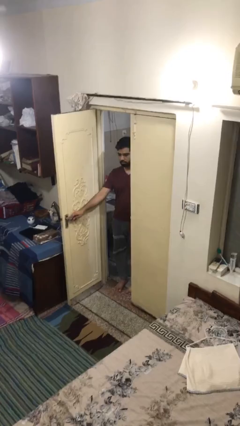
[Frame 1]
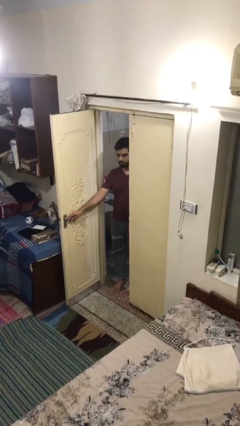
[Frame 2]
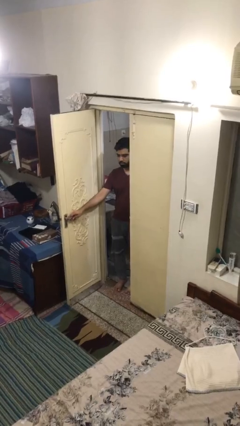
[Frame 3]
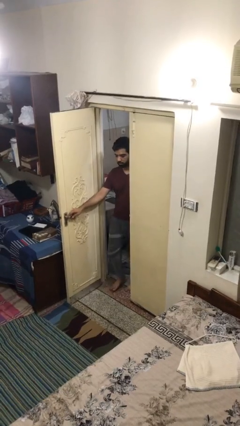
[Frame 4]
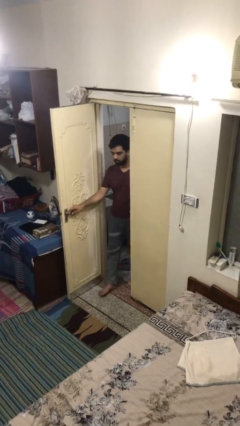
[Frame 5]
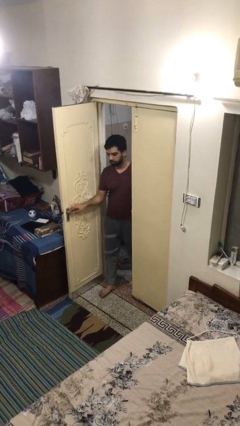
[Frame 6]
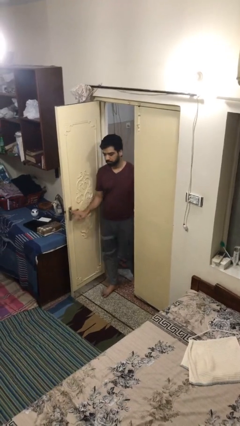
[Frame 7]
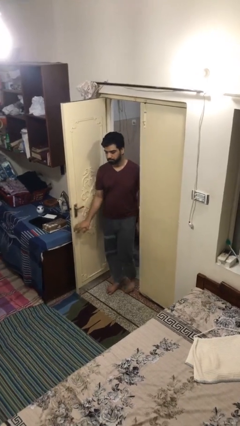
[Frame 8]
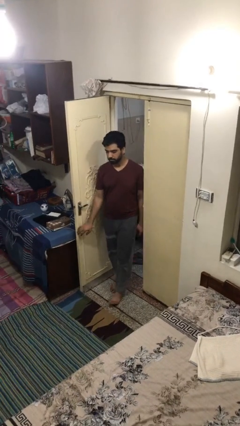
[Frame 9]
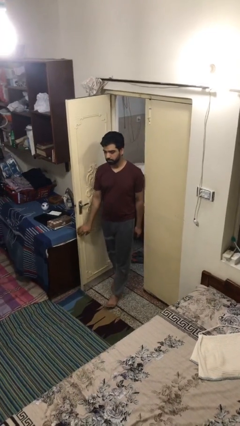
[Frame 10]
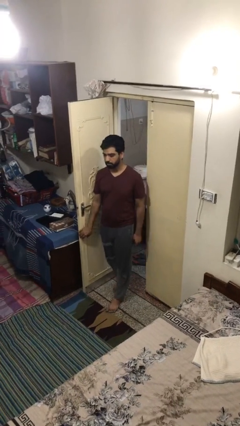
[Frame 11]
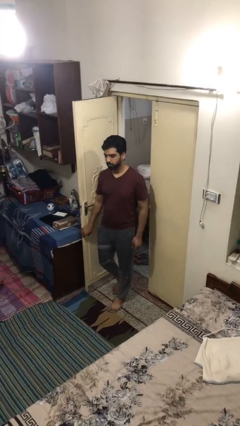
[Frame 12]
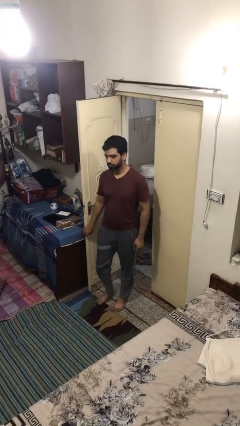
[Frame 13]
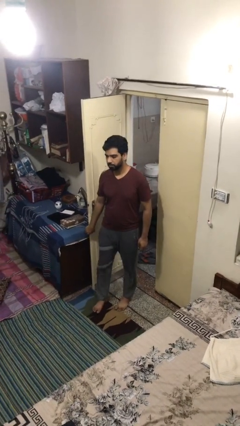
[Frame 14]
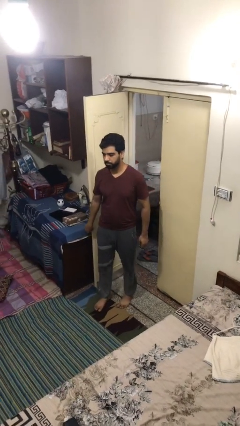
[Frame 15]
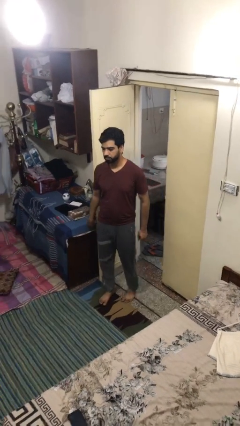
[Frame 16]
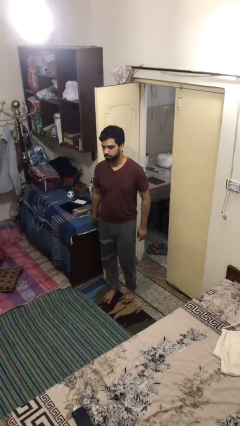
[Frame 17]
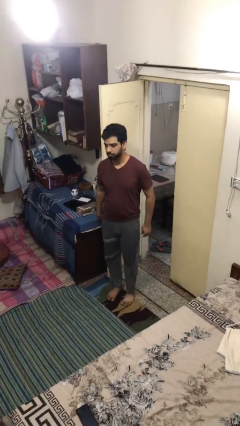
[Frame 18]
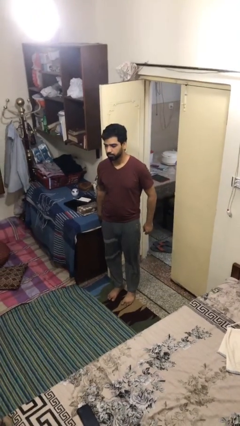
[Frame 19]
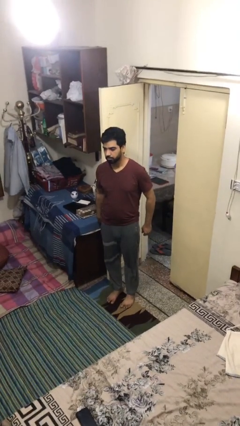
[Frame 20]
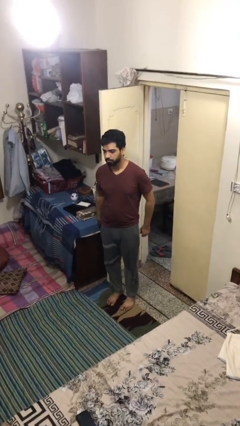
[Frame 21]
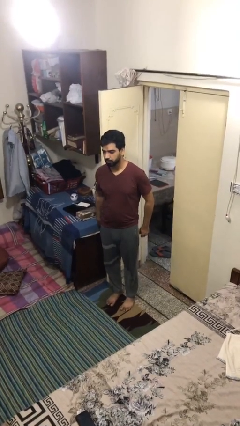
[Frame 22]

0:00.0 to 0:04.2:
person enters scene through structure

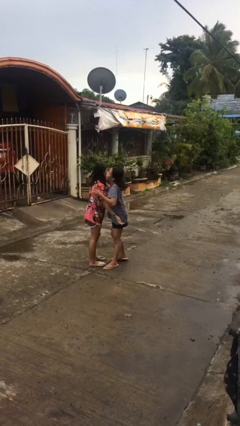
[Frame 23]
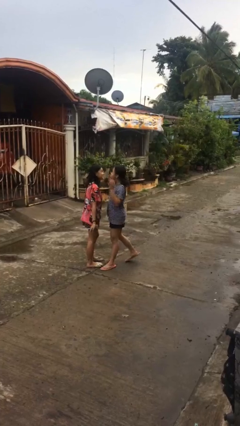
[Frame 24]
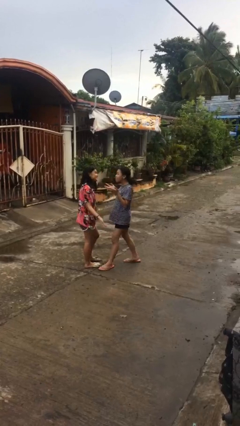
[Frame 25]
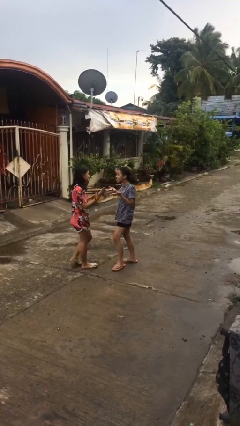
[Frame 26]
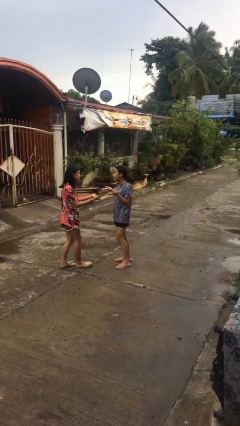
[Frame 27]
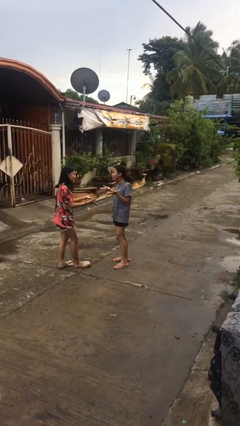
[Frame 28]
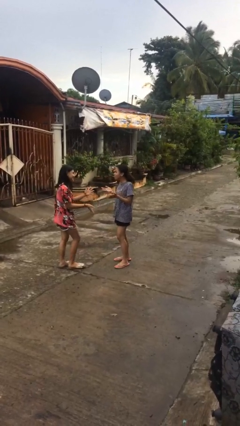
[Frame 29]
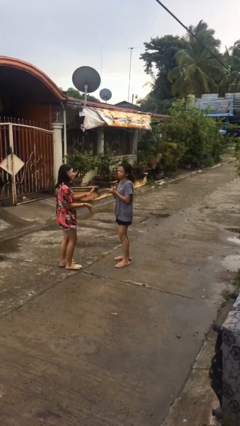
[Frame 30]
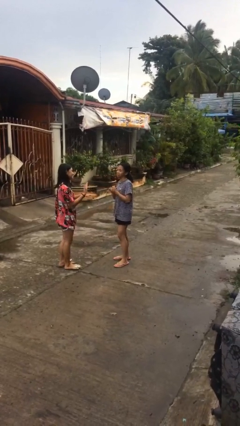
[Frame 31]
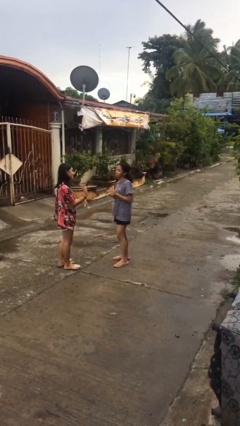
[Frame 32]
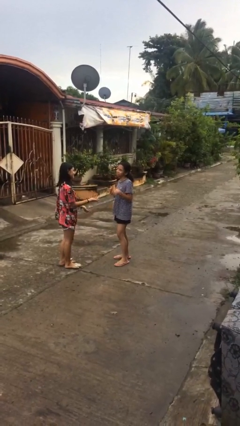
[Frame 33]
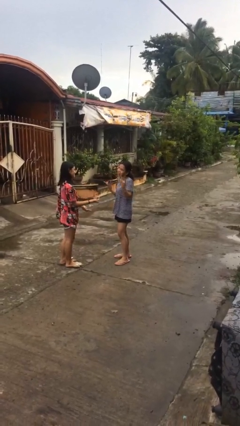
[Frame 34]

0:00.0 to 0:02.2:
person talks to person

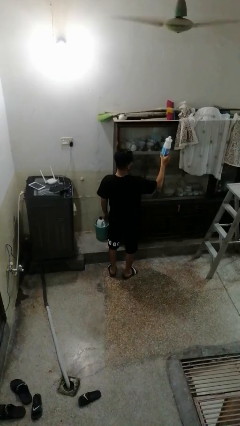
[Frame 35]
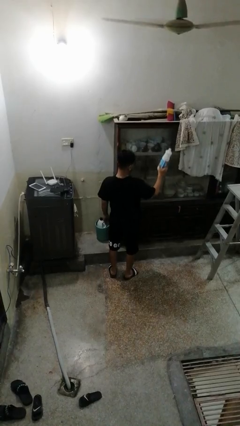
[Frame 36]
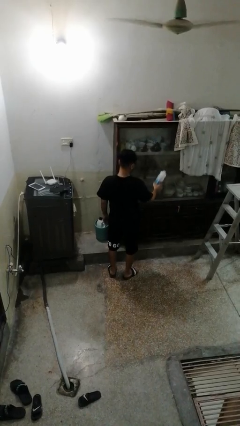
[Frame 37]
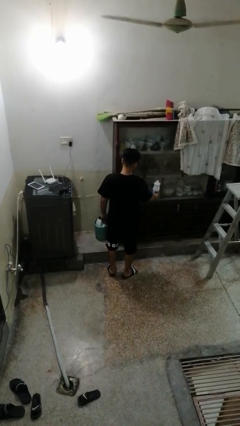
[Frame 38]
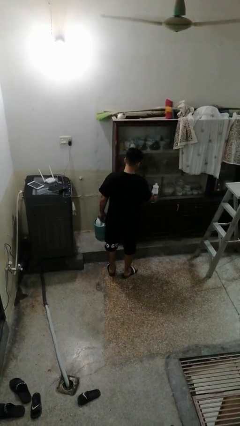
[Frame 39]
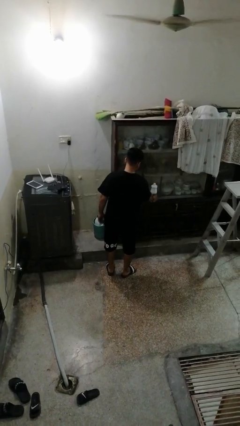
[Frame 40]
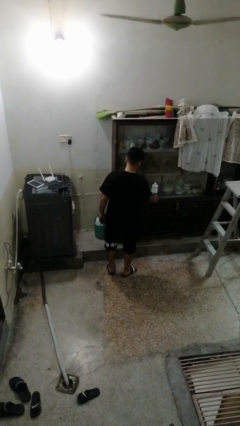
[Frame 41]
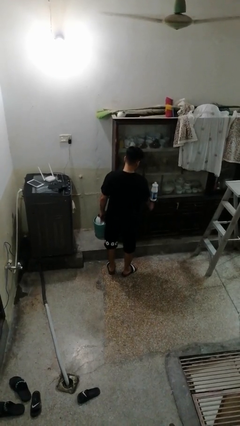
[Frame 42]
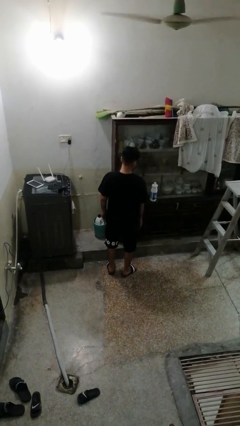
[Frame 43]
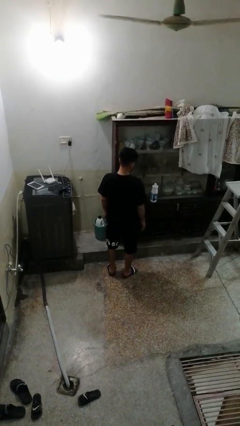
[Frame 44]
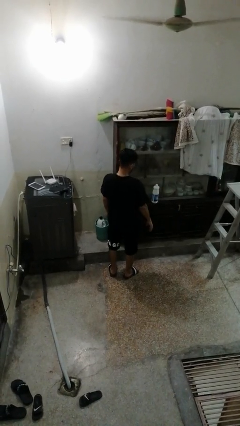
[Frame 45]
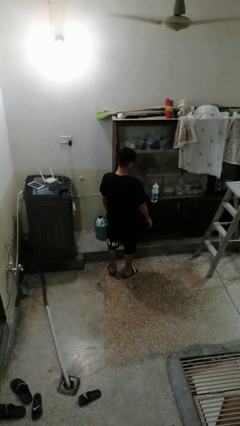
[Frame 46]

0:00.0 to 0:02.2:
person puts down object on shelf

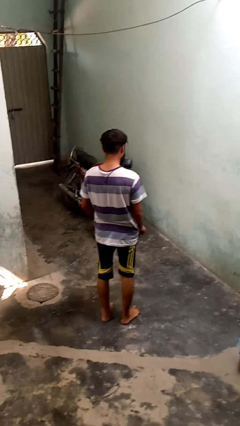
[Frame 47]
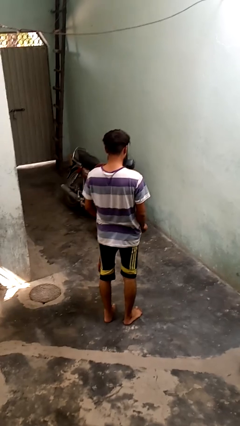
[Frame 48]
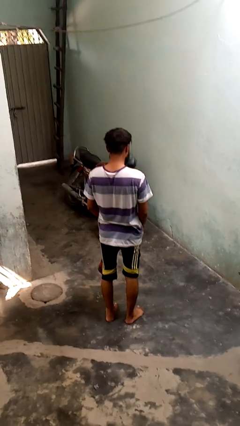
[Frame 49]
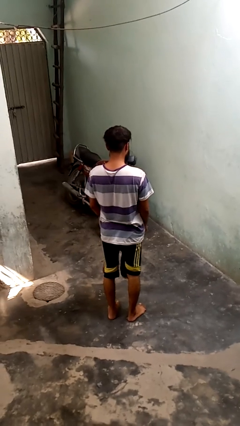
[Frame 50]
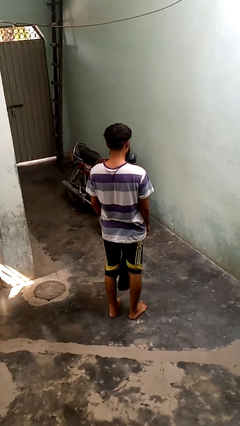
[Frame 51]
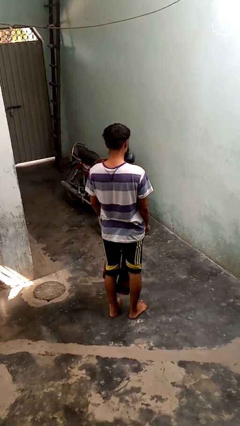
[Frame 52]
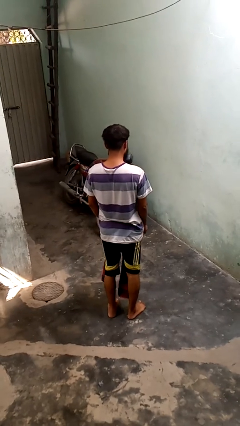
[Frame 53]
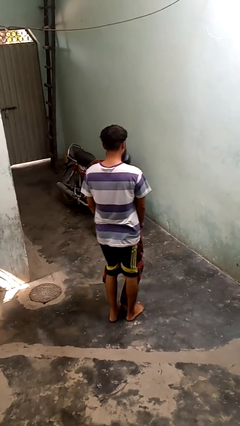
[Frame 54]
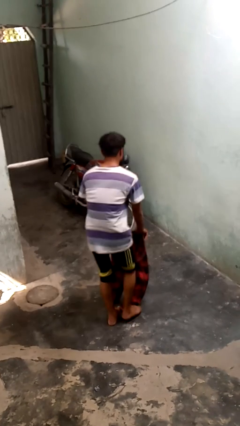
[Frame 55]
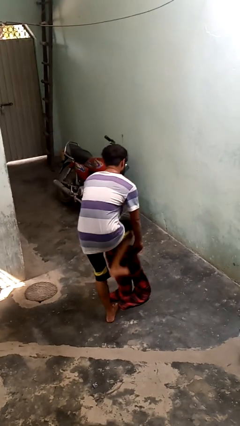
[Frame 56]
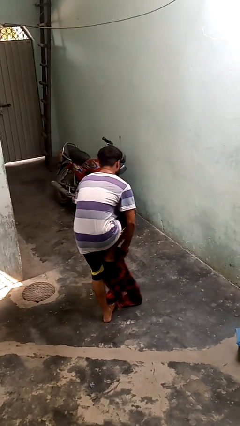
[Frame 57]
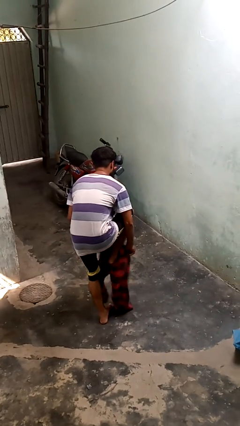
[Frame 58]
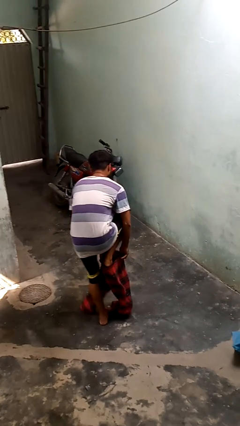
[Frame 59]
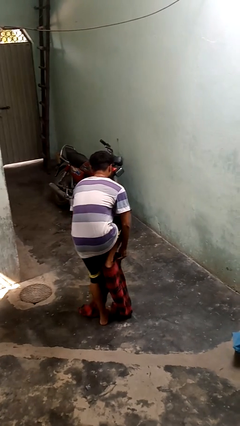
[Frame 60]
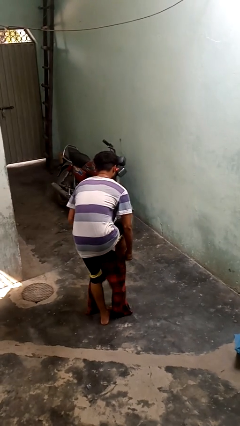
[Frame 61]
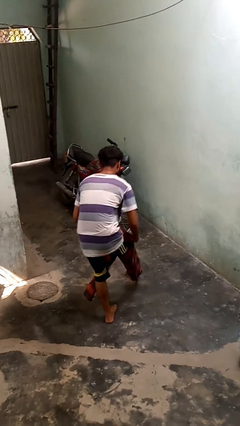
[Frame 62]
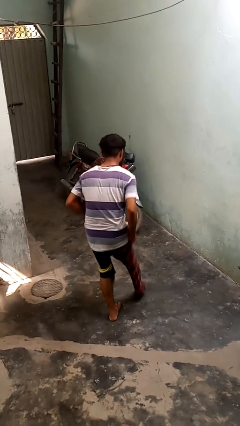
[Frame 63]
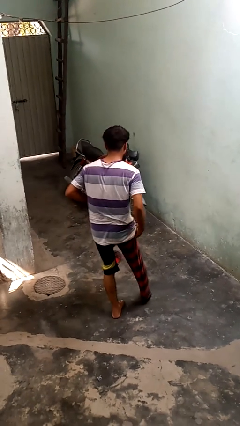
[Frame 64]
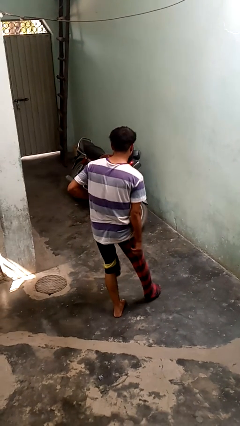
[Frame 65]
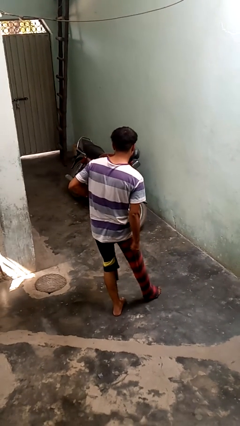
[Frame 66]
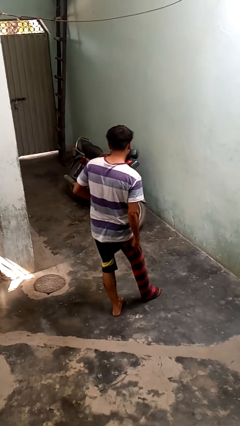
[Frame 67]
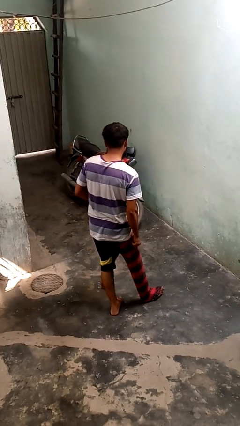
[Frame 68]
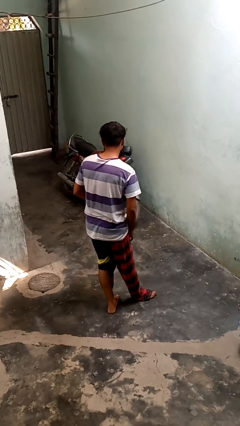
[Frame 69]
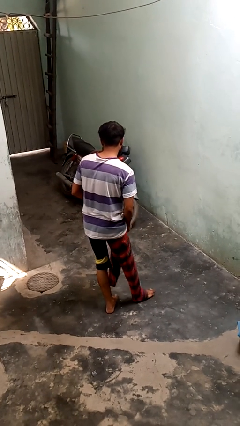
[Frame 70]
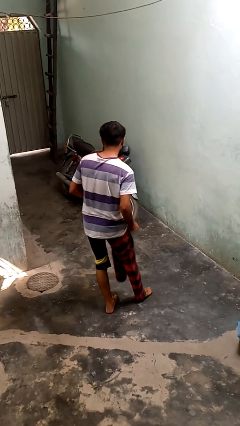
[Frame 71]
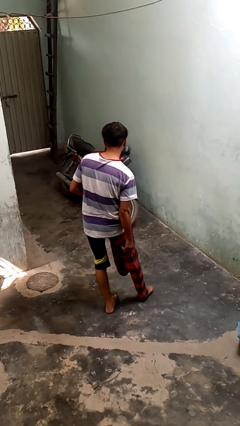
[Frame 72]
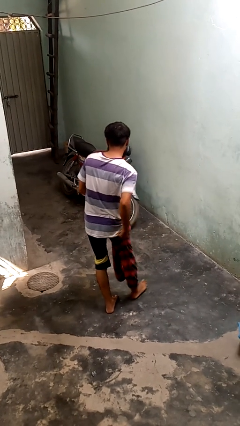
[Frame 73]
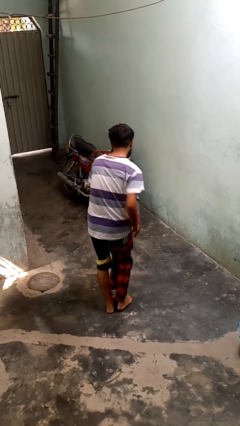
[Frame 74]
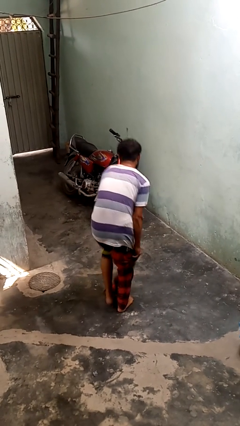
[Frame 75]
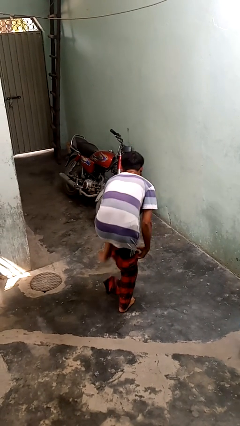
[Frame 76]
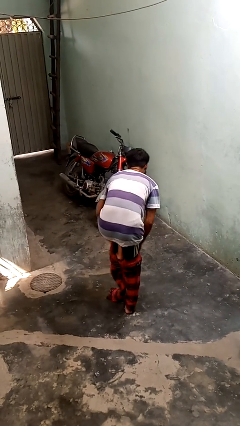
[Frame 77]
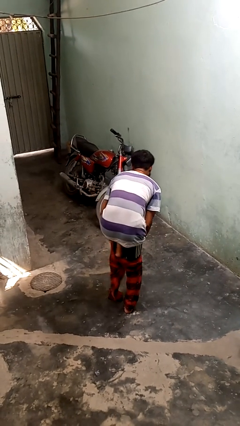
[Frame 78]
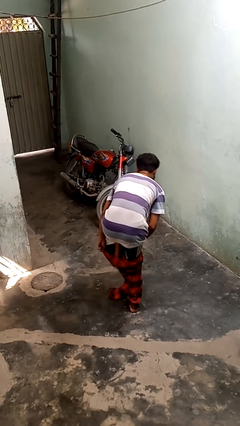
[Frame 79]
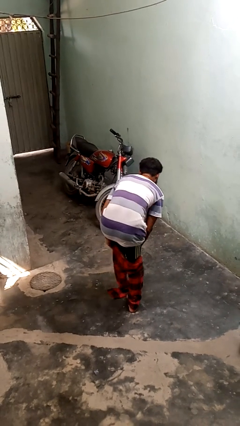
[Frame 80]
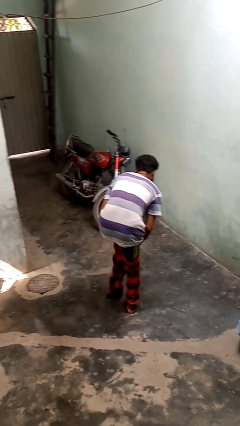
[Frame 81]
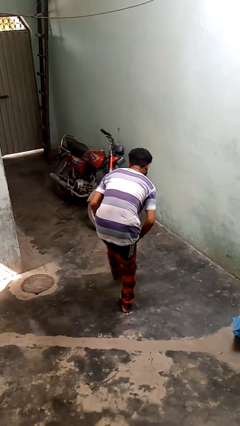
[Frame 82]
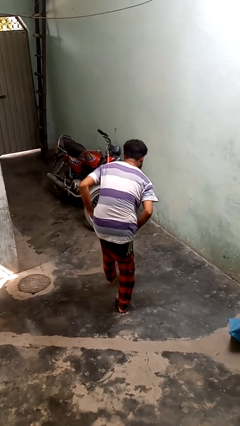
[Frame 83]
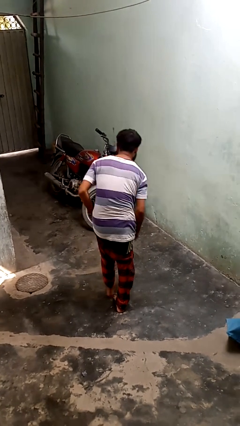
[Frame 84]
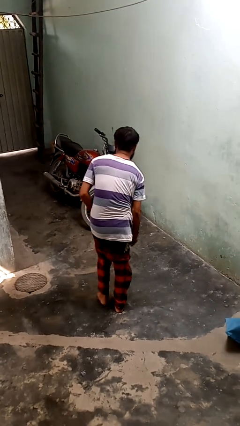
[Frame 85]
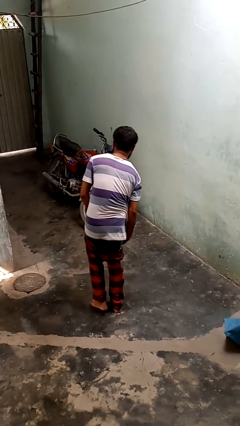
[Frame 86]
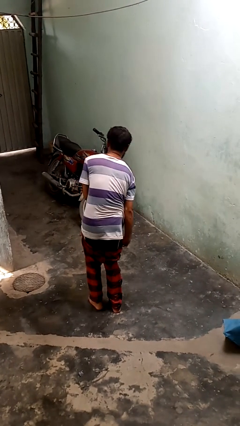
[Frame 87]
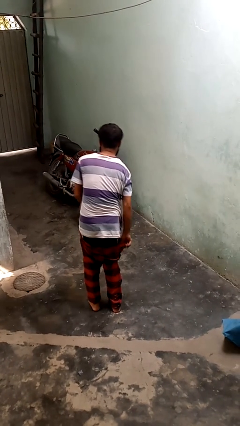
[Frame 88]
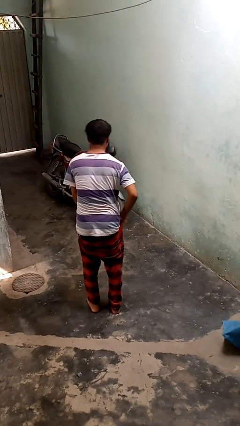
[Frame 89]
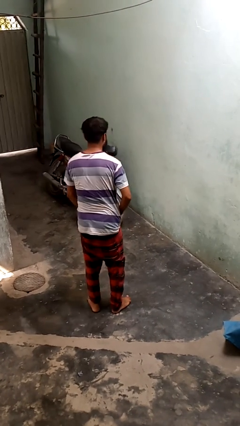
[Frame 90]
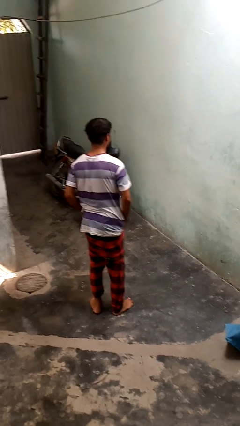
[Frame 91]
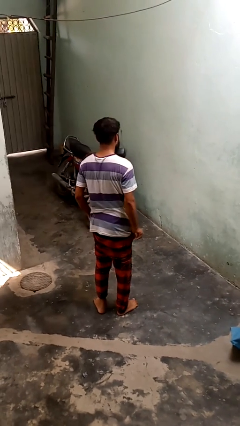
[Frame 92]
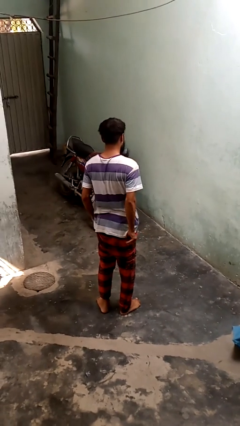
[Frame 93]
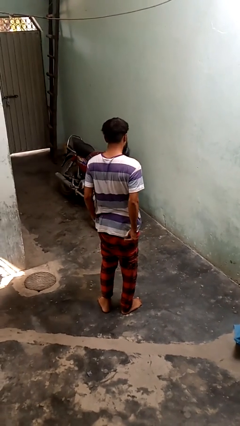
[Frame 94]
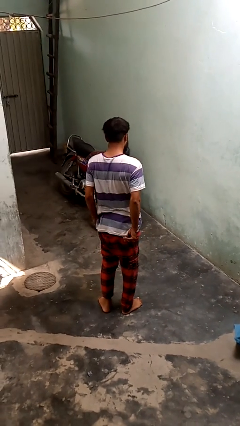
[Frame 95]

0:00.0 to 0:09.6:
person puts on pants
